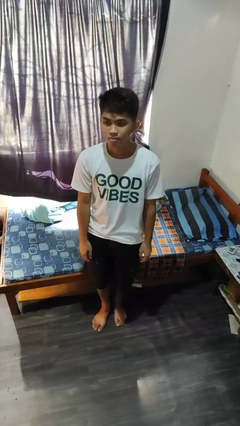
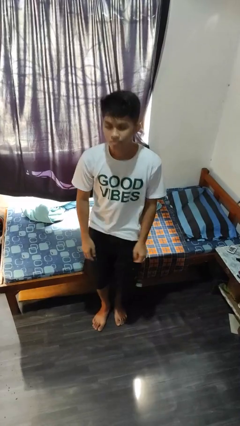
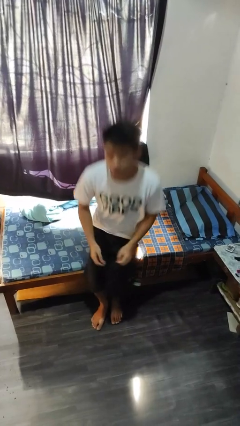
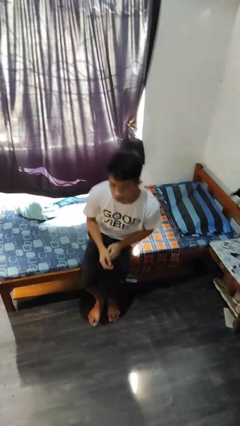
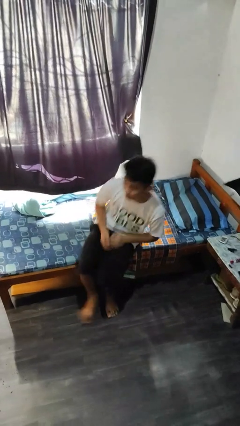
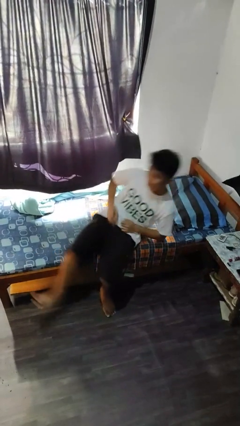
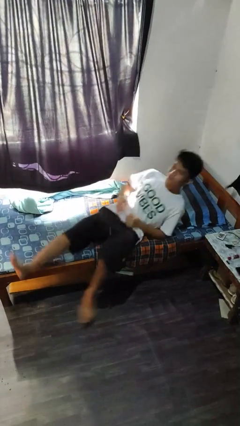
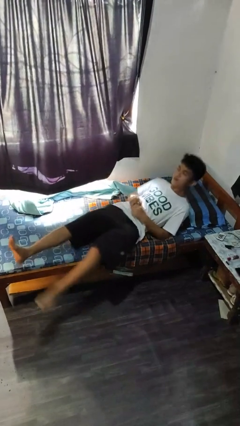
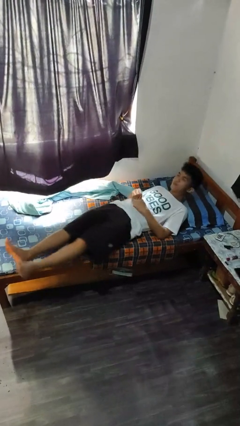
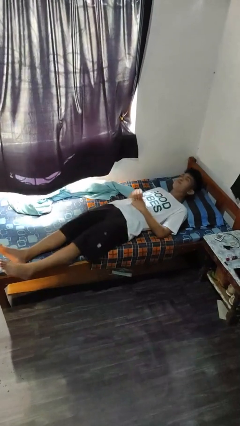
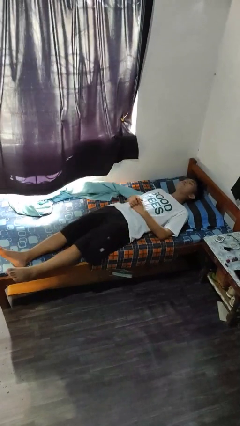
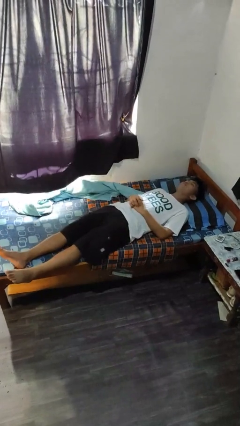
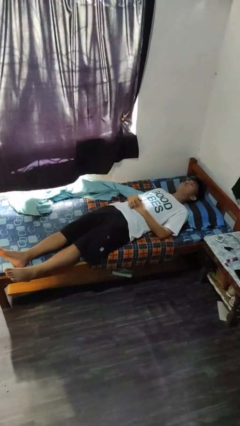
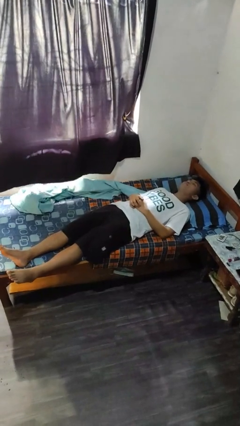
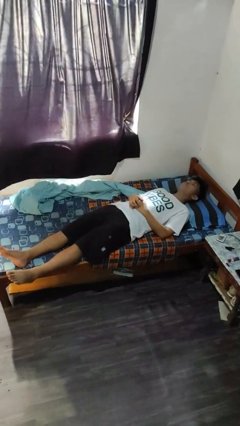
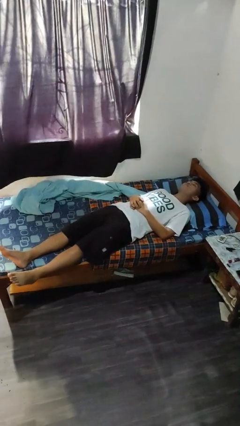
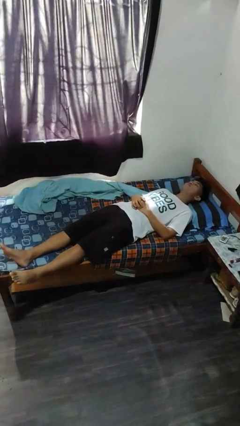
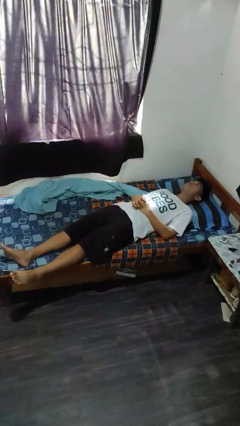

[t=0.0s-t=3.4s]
person lies down on bed

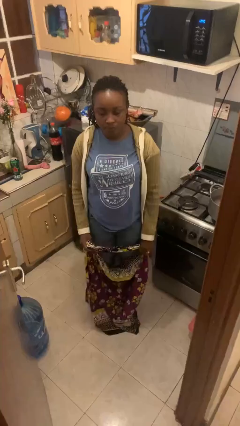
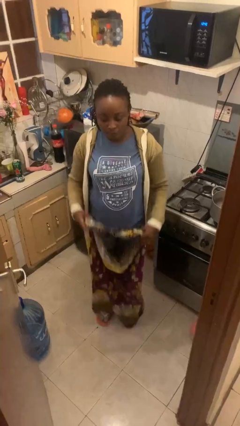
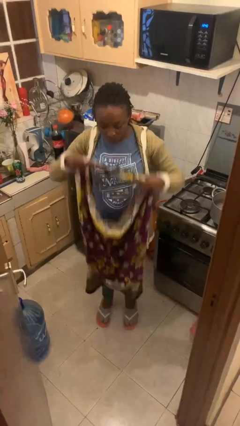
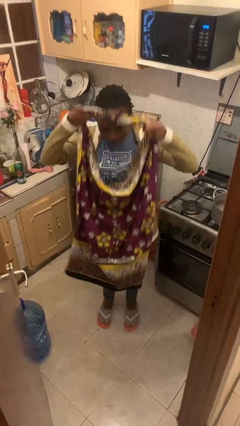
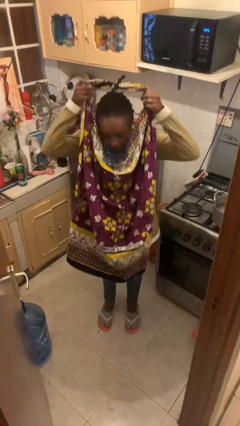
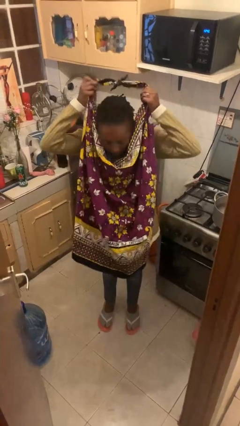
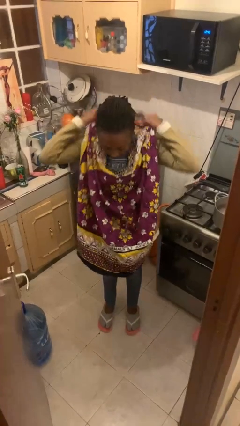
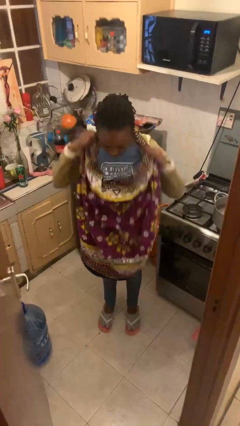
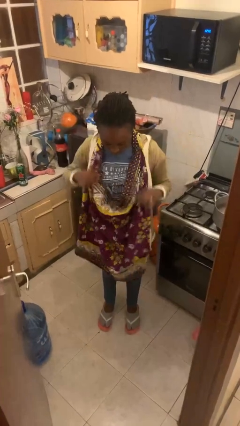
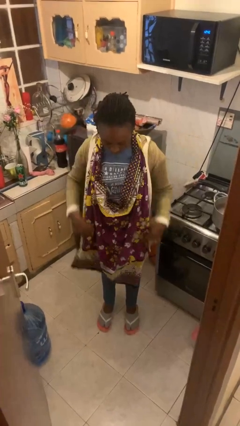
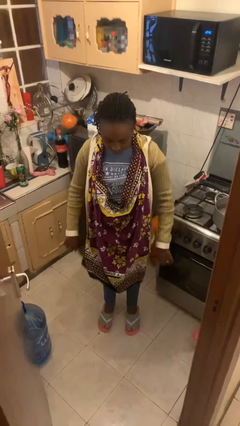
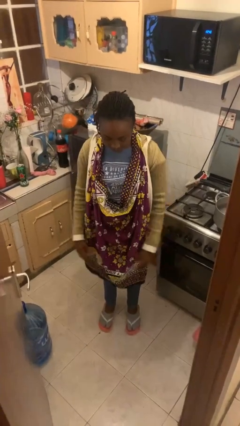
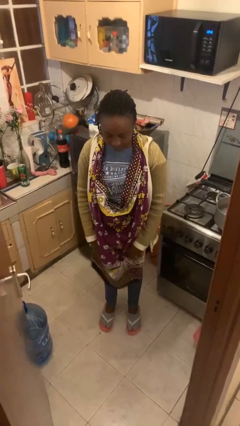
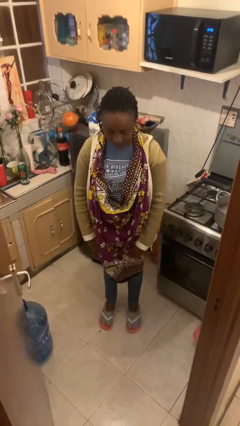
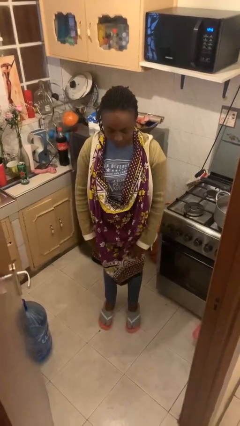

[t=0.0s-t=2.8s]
person puts on apron

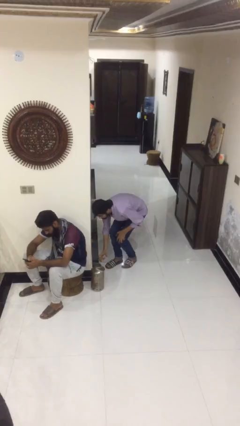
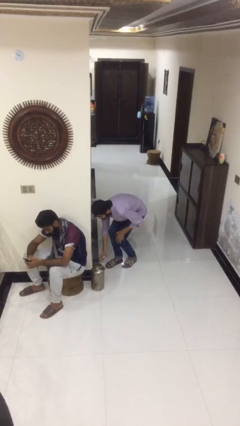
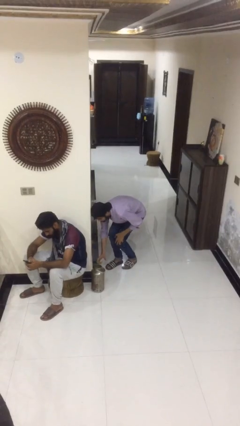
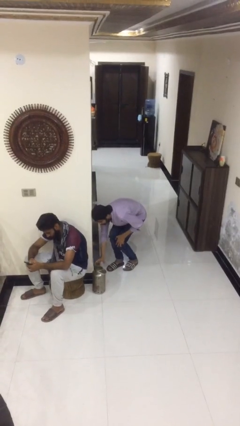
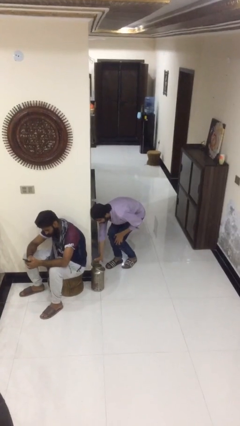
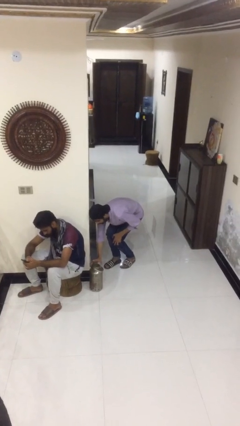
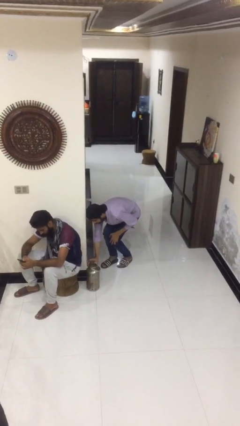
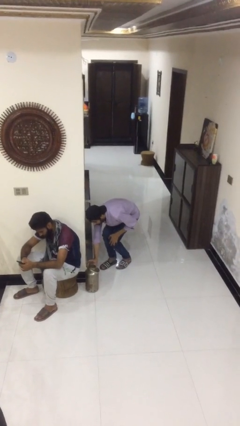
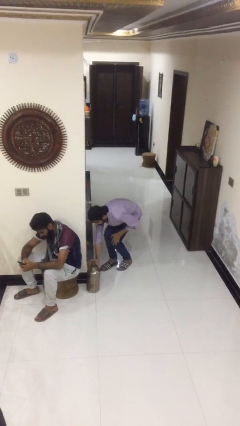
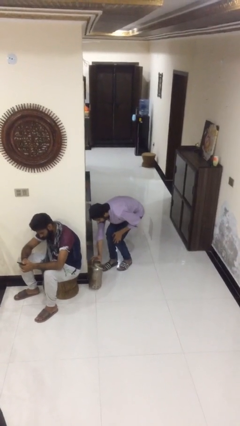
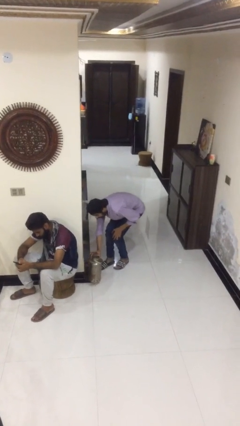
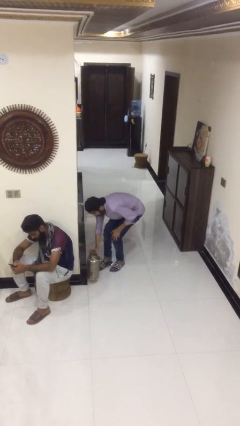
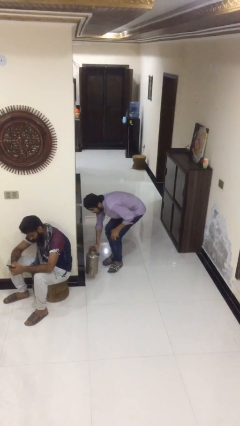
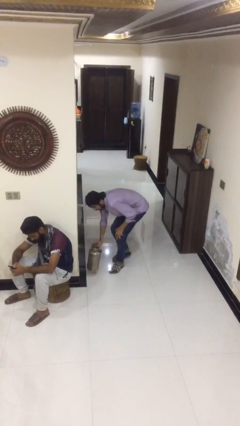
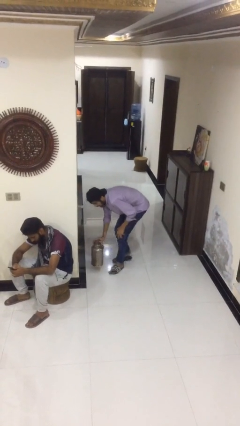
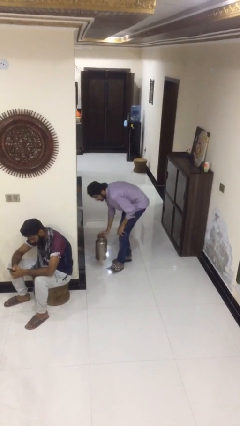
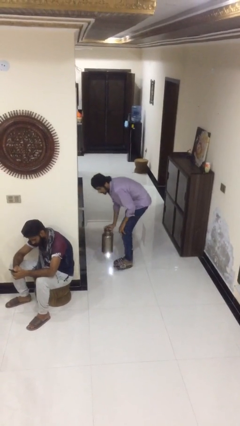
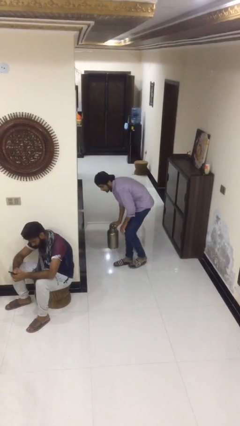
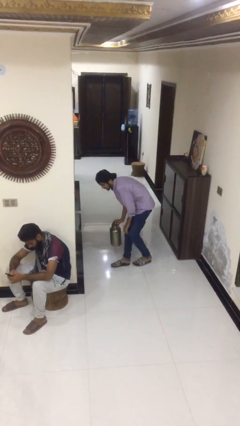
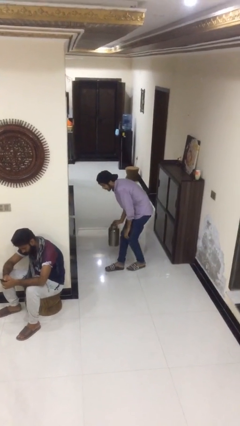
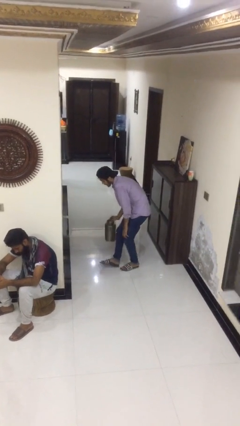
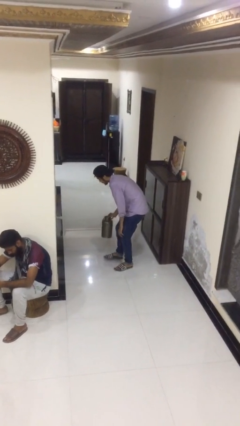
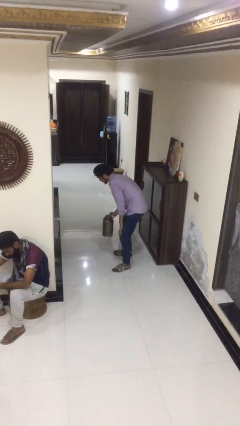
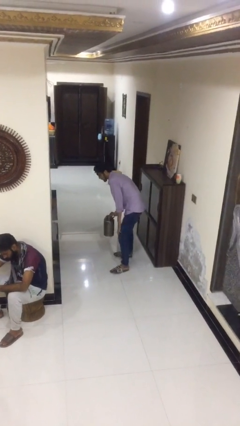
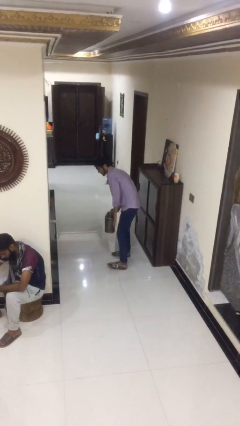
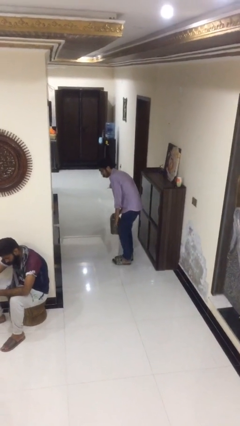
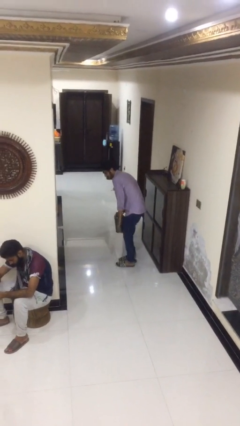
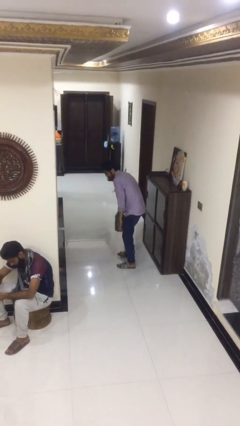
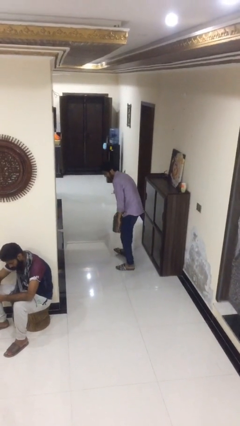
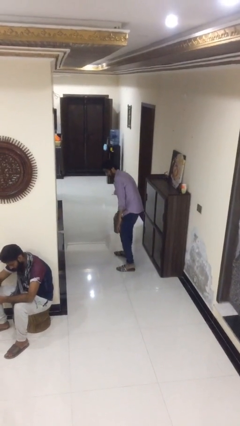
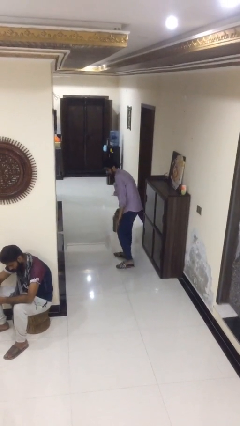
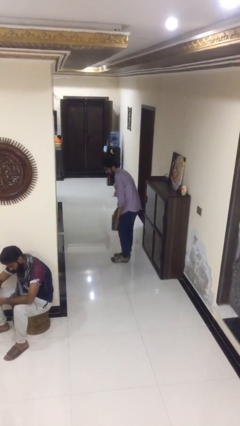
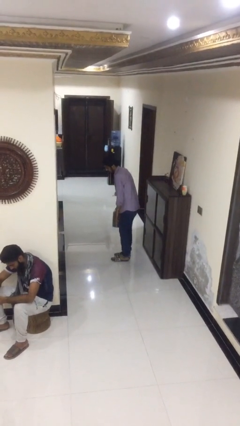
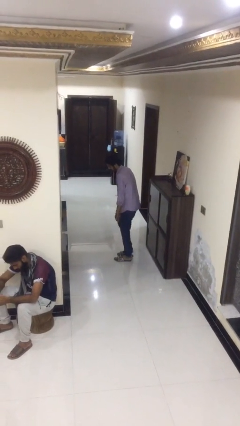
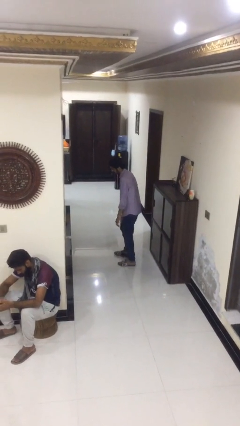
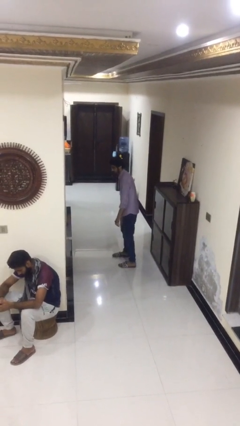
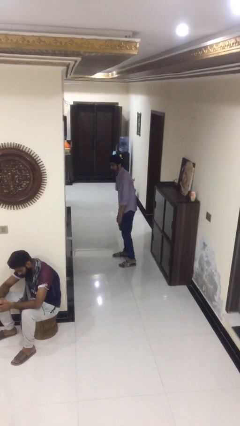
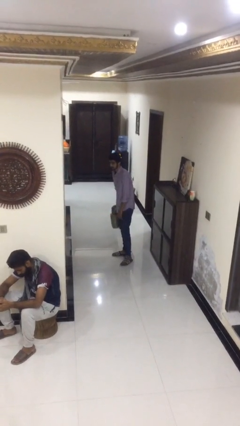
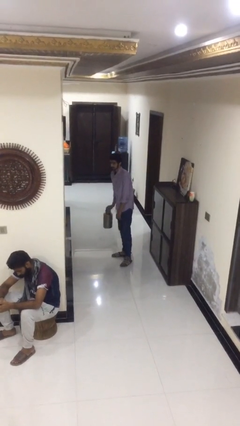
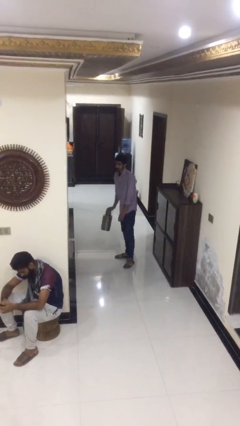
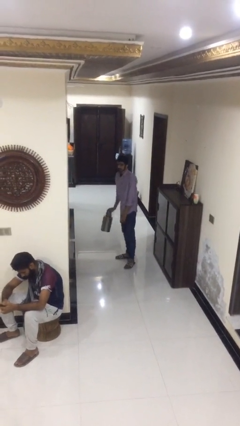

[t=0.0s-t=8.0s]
person steals object from person

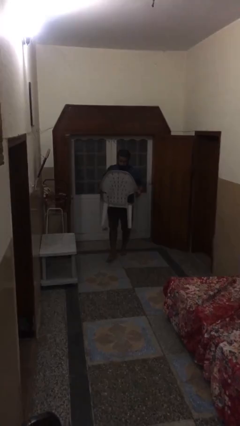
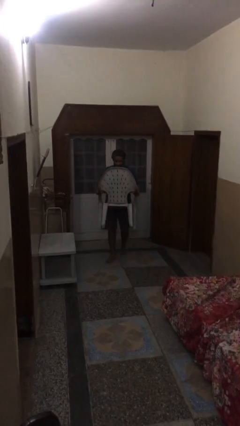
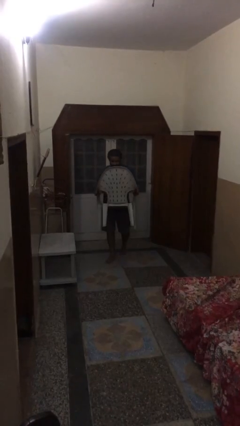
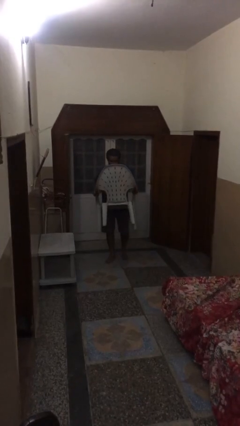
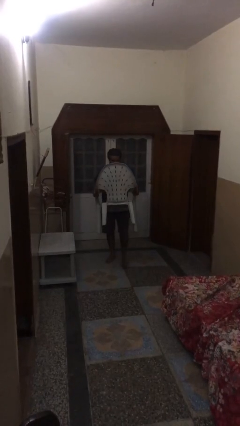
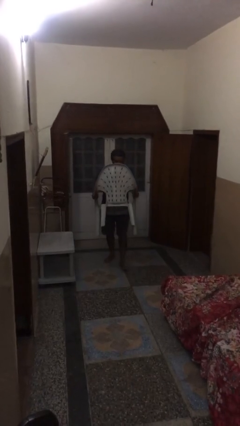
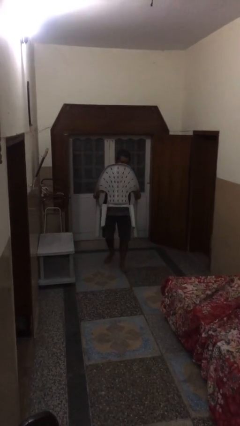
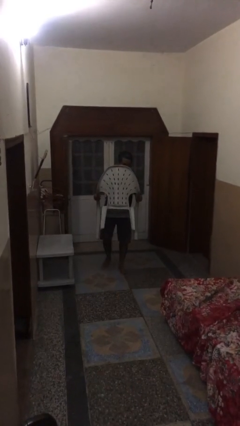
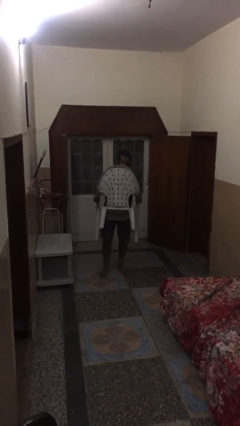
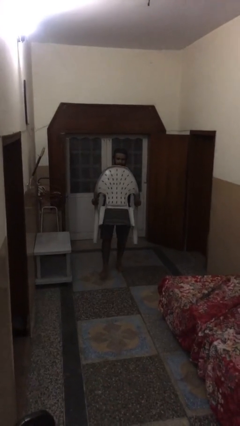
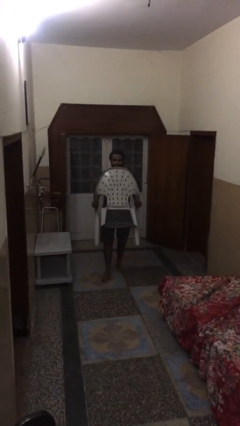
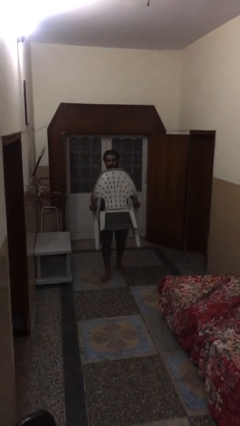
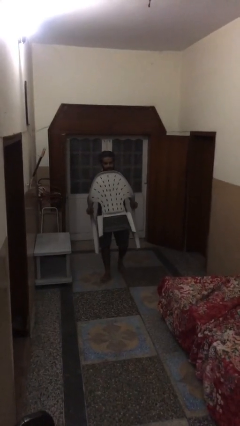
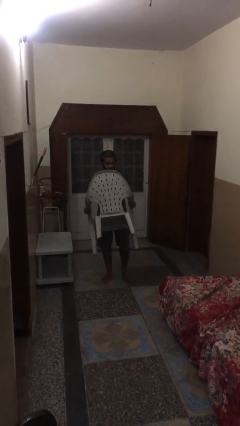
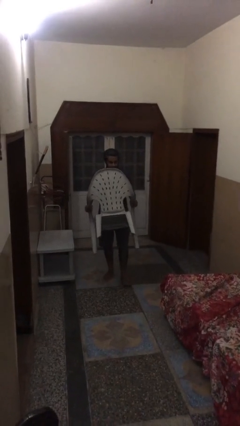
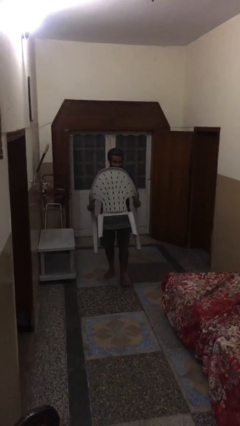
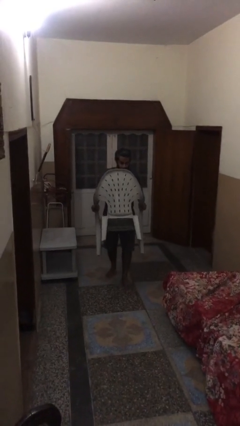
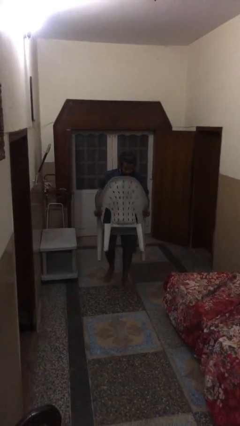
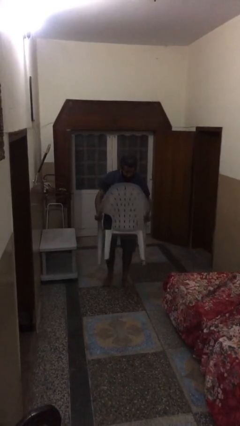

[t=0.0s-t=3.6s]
person carries heavy object

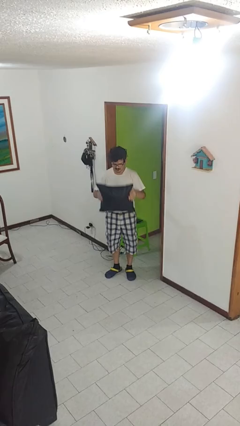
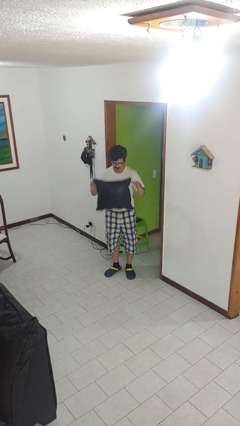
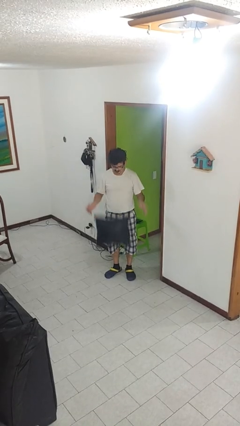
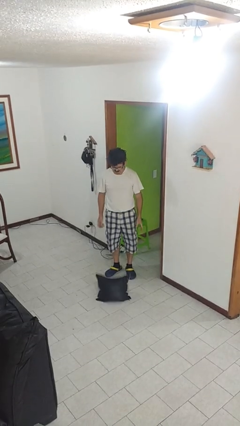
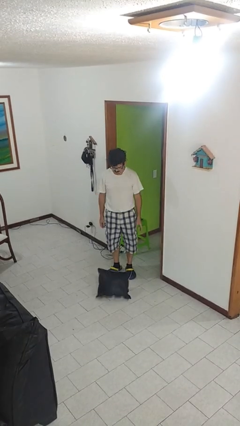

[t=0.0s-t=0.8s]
person throws object into air
